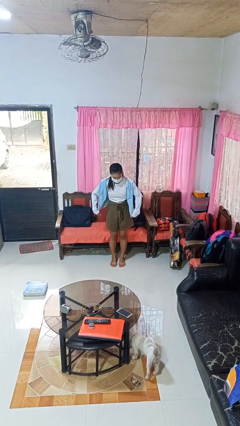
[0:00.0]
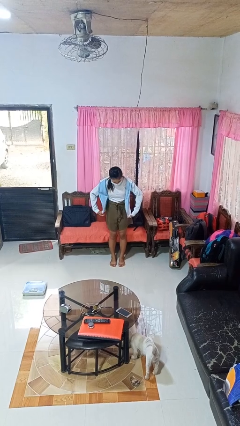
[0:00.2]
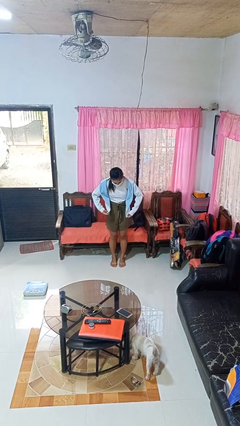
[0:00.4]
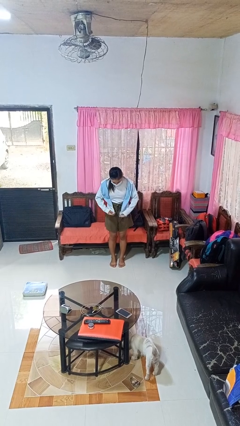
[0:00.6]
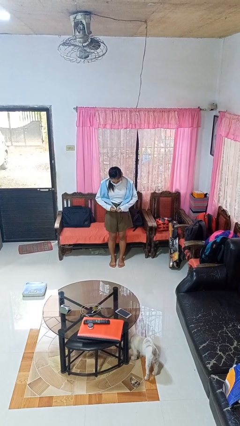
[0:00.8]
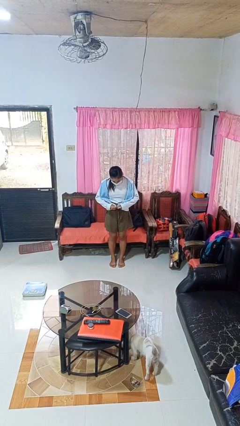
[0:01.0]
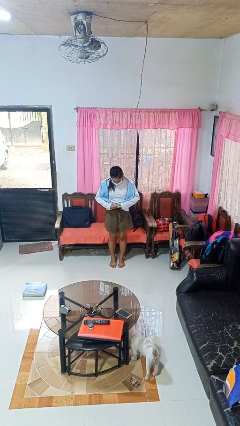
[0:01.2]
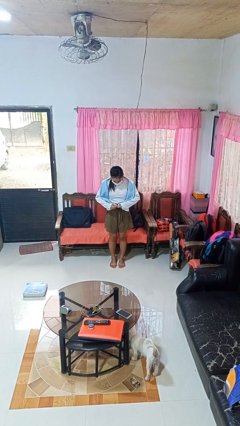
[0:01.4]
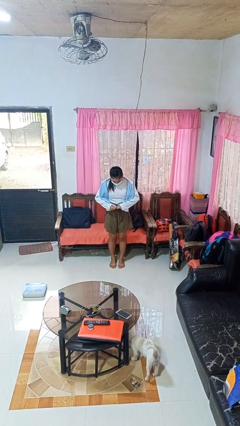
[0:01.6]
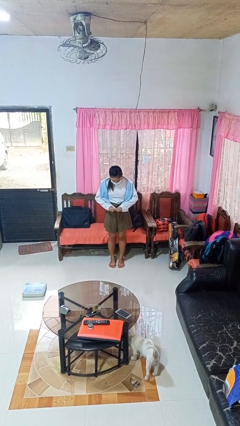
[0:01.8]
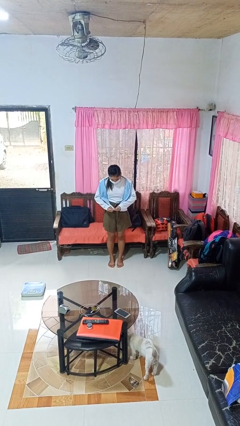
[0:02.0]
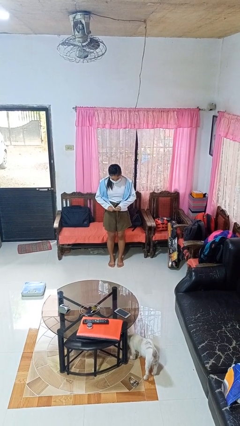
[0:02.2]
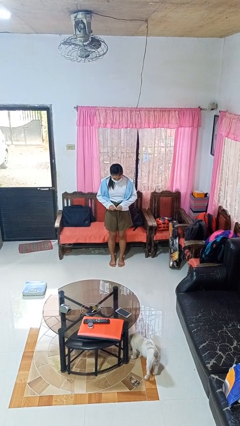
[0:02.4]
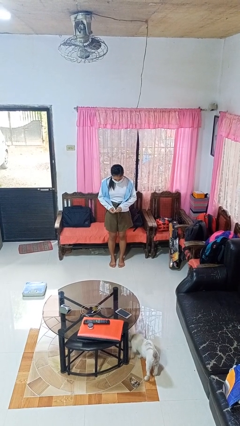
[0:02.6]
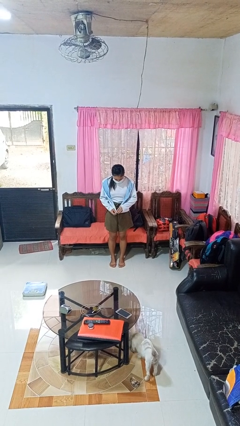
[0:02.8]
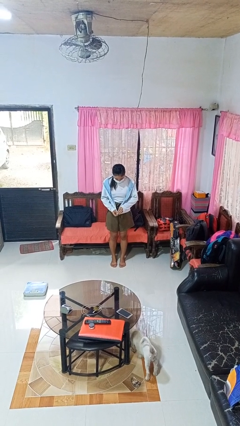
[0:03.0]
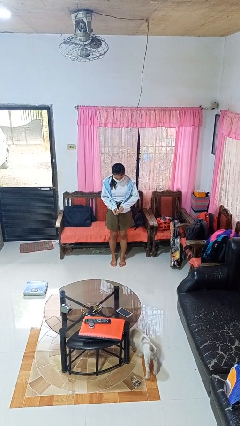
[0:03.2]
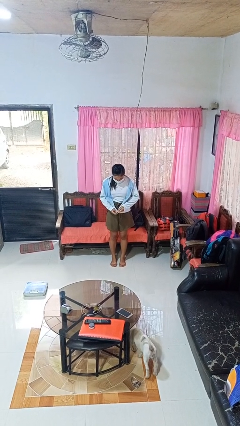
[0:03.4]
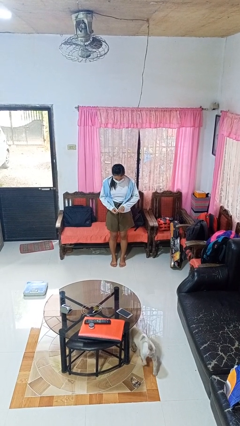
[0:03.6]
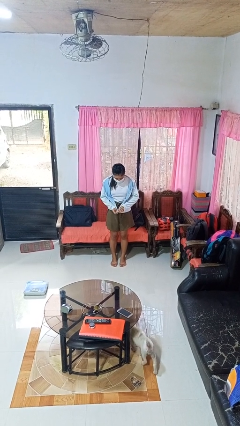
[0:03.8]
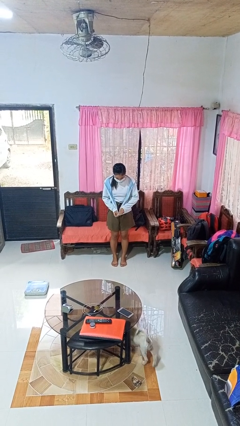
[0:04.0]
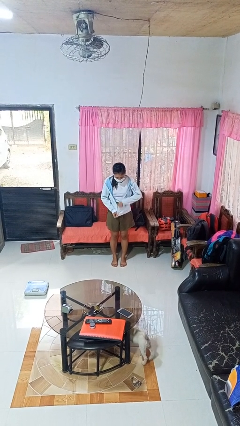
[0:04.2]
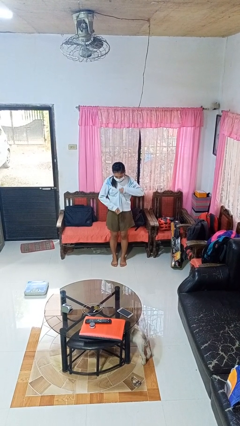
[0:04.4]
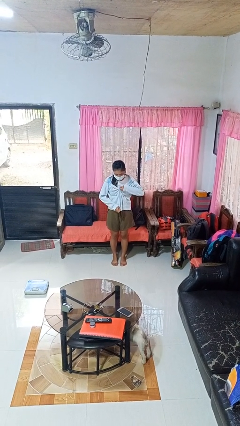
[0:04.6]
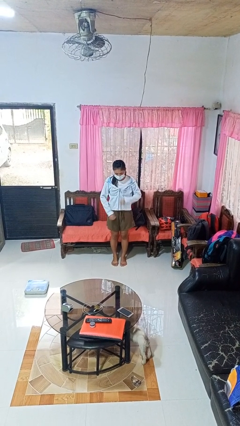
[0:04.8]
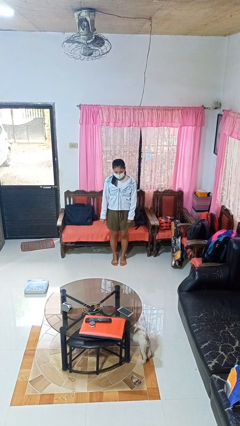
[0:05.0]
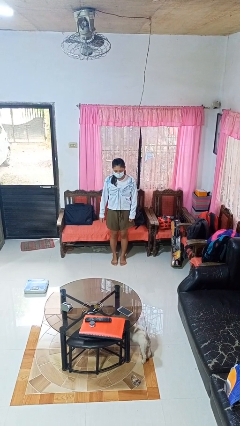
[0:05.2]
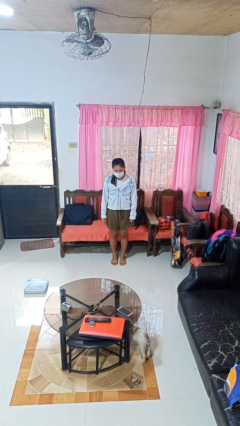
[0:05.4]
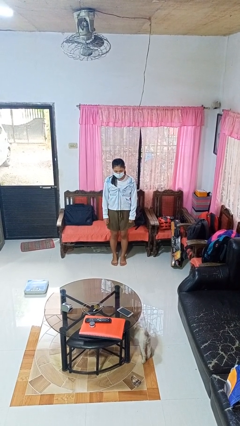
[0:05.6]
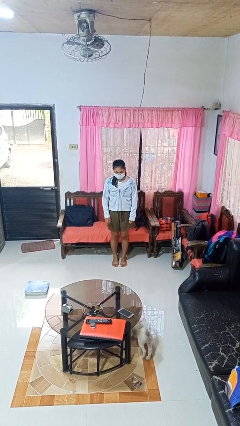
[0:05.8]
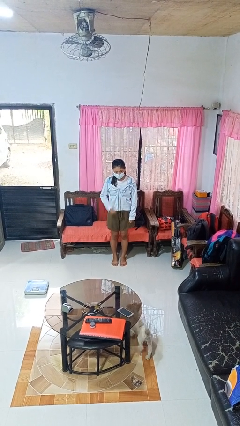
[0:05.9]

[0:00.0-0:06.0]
person zips up jacket

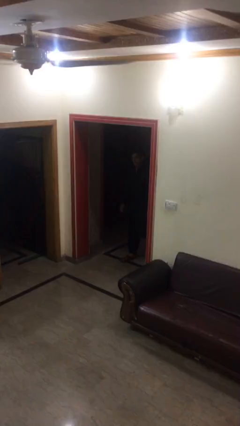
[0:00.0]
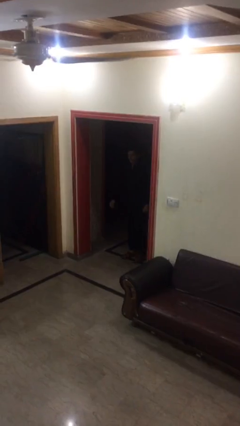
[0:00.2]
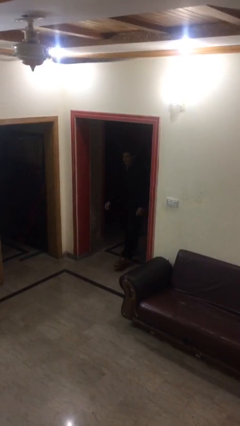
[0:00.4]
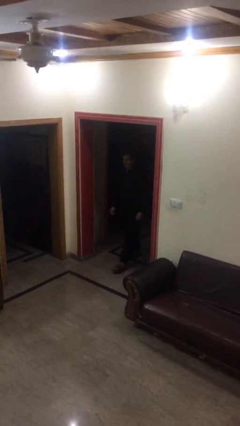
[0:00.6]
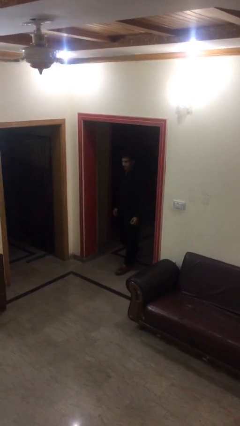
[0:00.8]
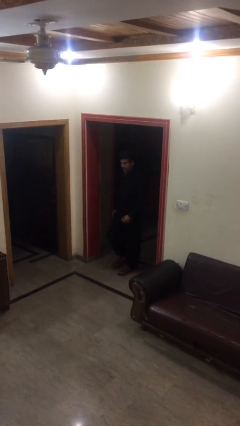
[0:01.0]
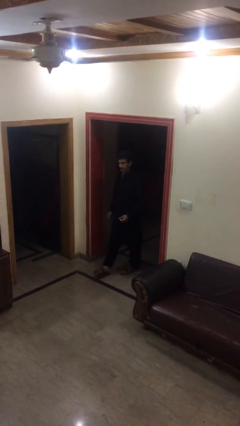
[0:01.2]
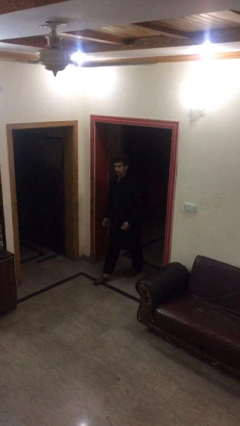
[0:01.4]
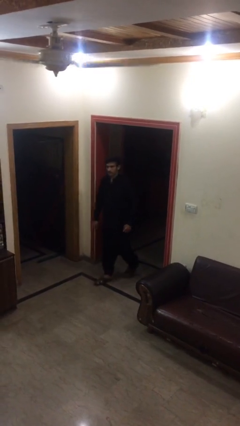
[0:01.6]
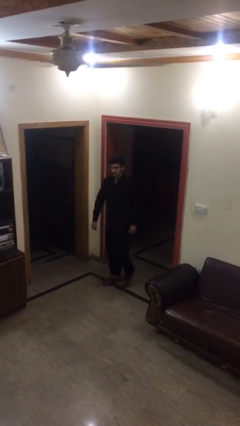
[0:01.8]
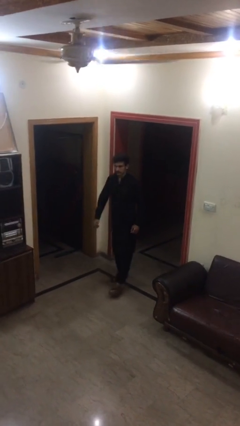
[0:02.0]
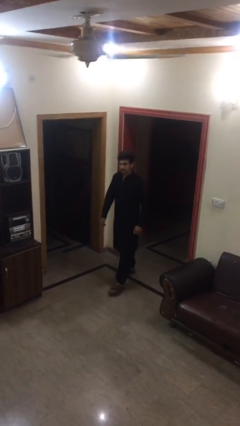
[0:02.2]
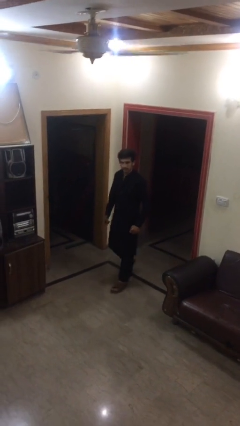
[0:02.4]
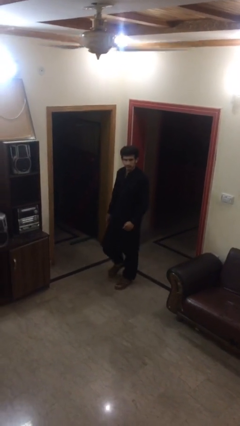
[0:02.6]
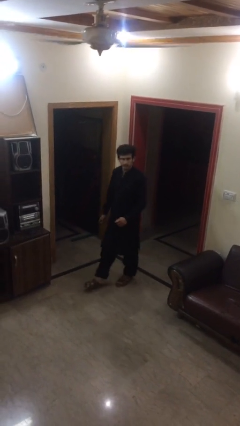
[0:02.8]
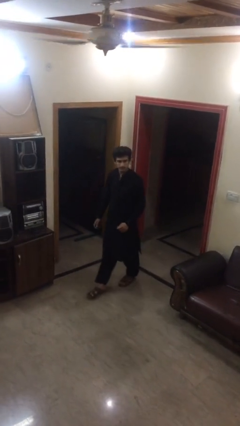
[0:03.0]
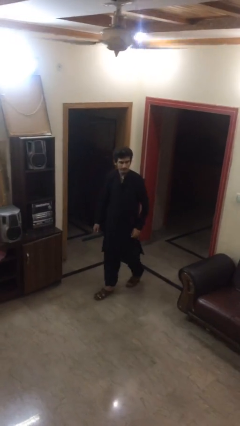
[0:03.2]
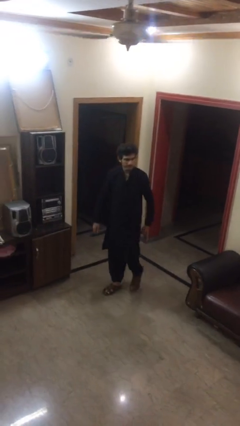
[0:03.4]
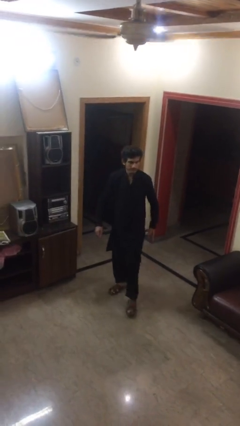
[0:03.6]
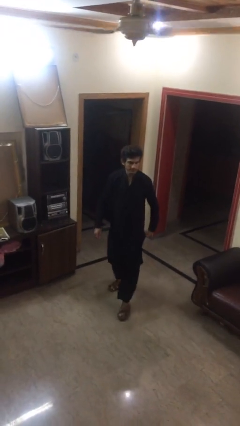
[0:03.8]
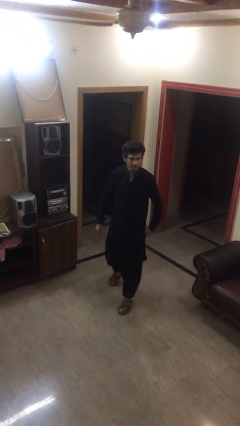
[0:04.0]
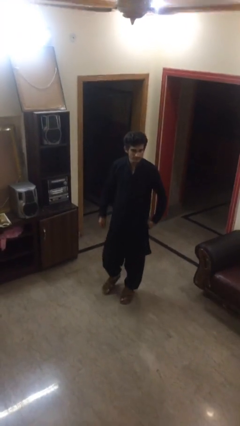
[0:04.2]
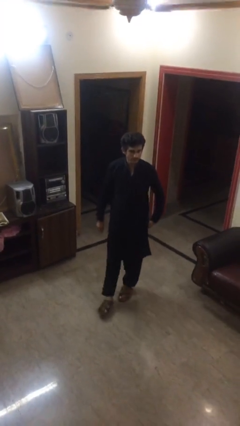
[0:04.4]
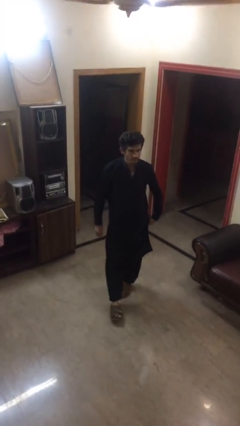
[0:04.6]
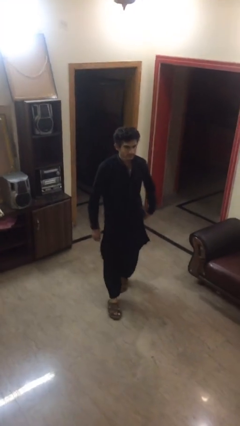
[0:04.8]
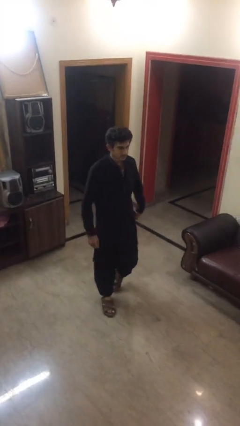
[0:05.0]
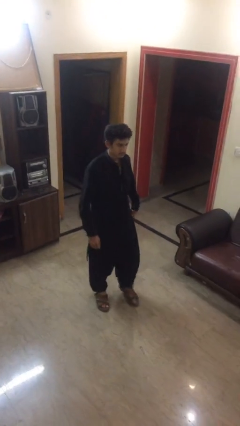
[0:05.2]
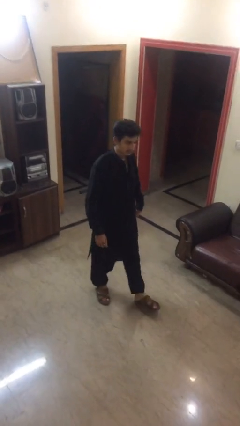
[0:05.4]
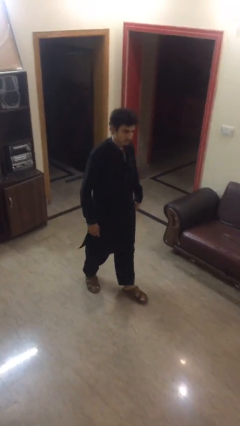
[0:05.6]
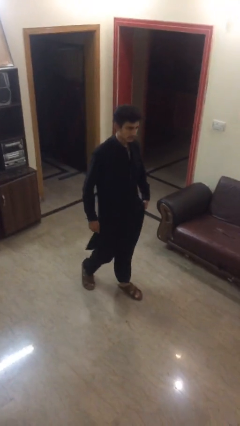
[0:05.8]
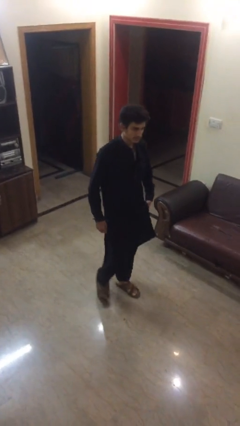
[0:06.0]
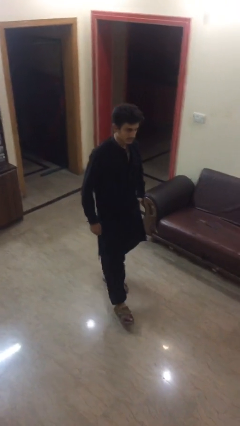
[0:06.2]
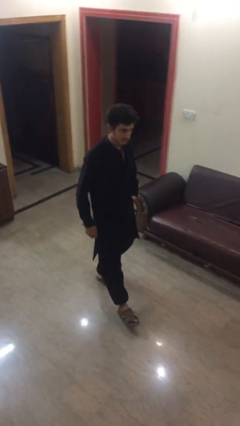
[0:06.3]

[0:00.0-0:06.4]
person enters scene through structure

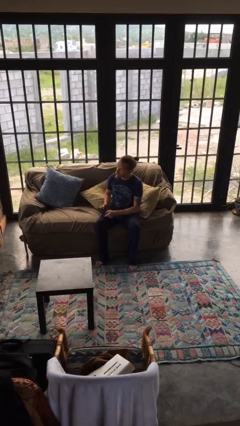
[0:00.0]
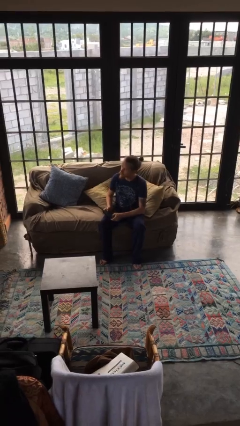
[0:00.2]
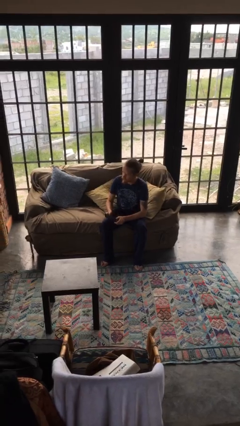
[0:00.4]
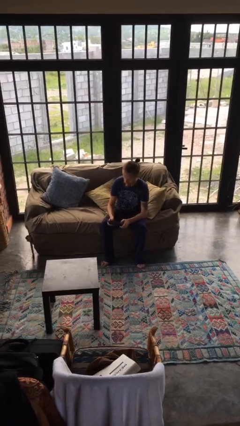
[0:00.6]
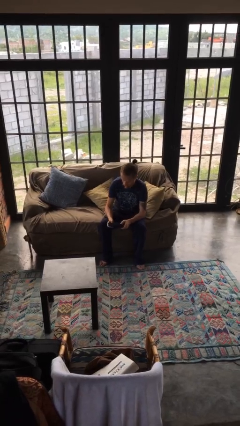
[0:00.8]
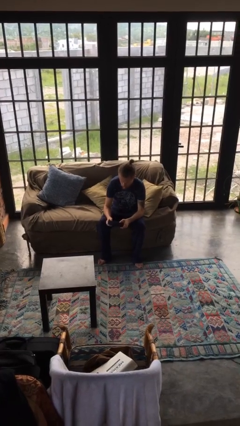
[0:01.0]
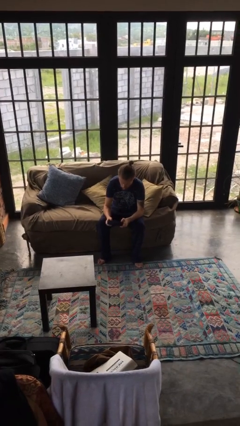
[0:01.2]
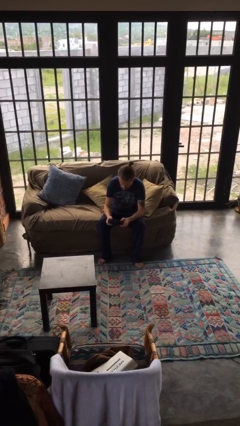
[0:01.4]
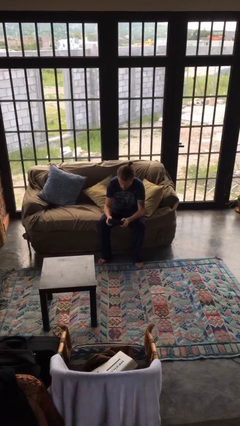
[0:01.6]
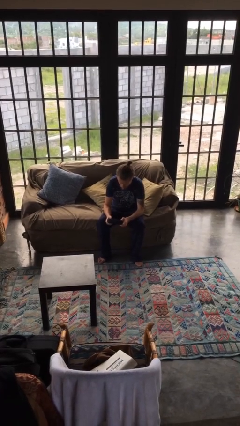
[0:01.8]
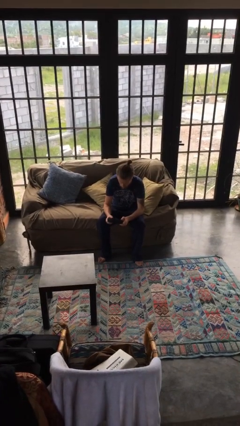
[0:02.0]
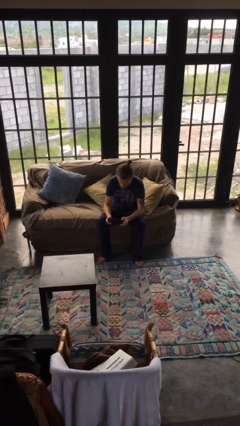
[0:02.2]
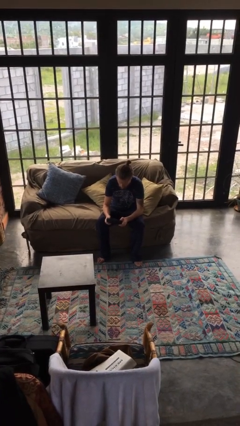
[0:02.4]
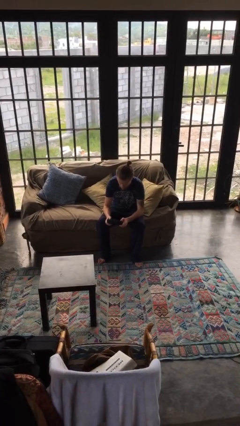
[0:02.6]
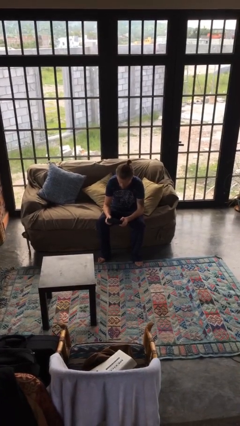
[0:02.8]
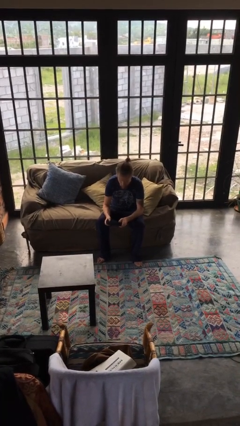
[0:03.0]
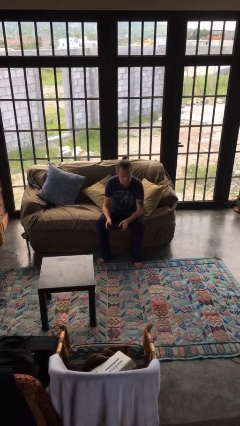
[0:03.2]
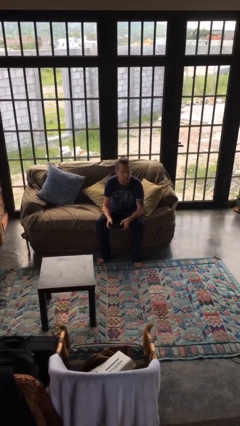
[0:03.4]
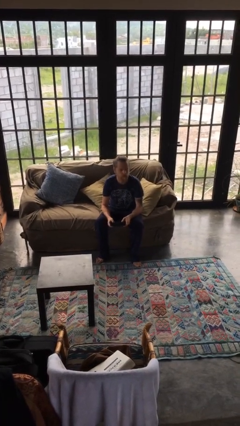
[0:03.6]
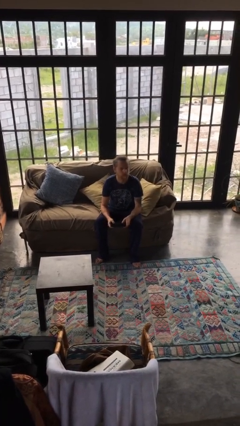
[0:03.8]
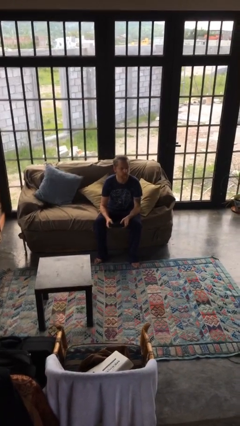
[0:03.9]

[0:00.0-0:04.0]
person interacts with handheld game

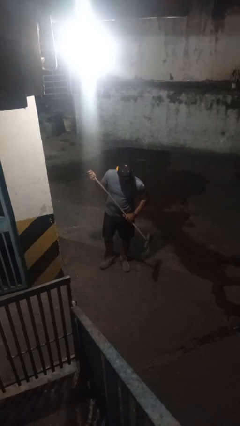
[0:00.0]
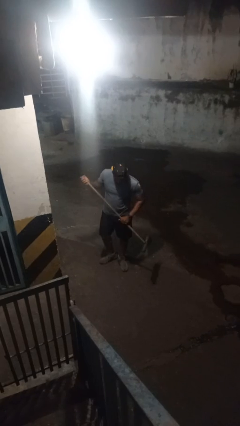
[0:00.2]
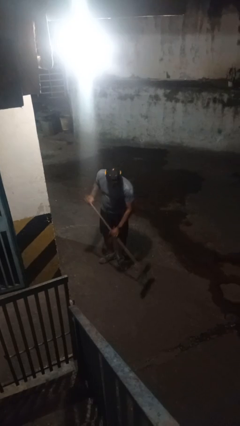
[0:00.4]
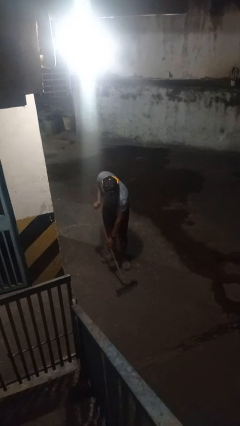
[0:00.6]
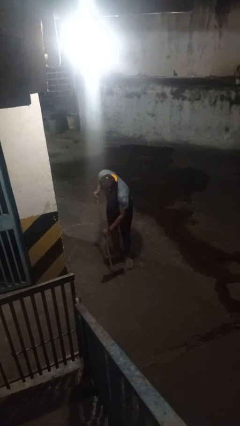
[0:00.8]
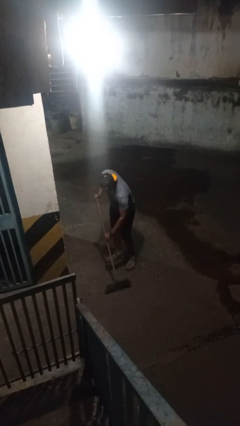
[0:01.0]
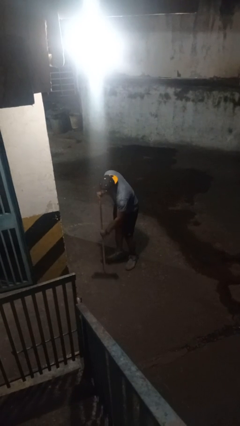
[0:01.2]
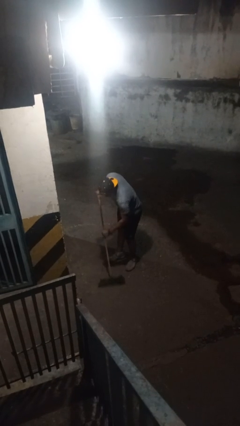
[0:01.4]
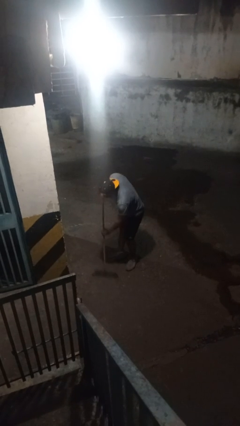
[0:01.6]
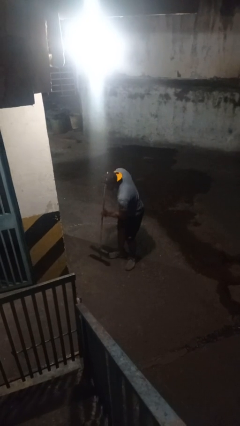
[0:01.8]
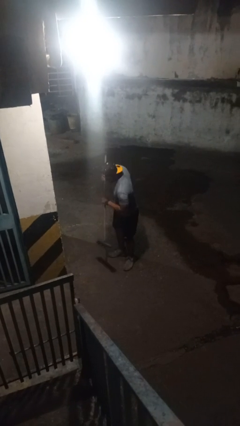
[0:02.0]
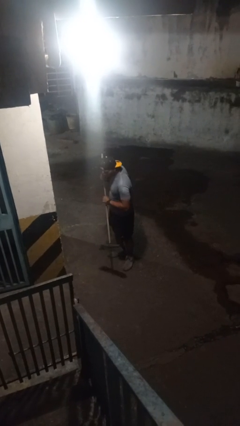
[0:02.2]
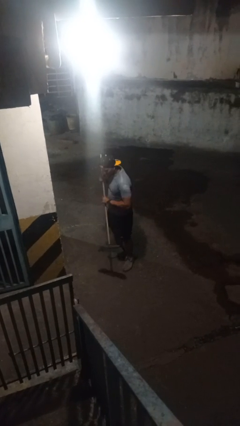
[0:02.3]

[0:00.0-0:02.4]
person sweeps floor
